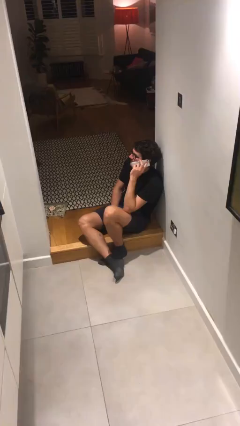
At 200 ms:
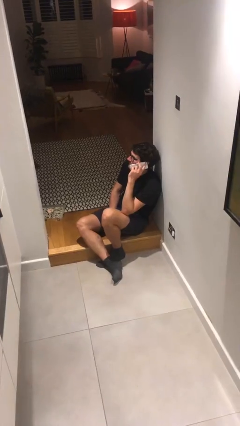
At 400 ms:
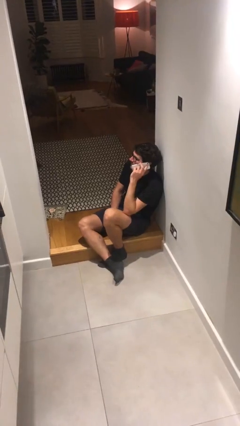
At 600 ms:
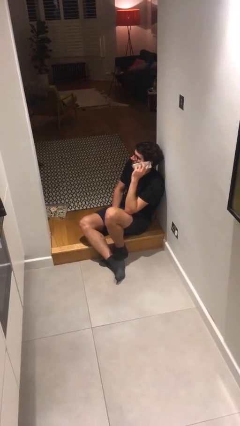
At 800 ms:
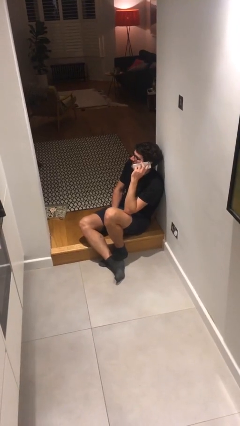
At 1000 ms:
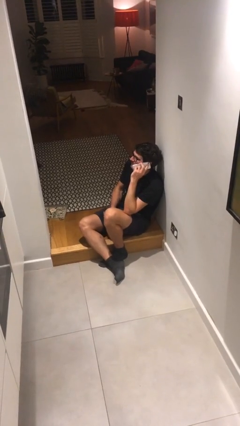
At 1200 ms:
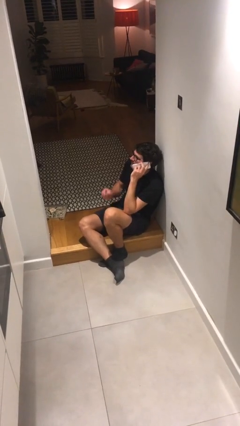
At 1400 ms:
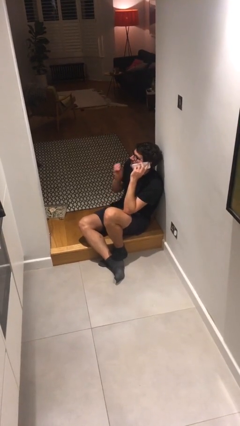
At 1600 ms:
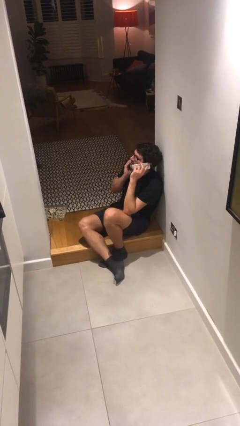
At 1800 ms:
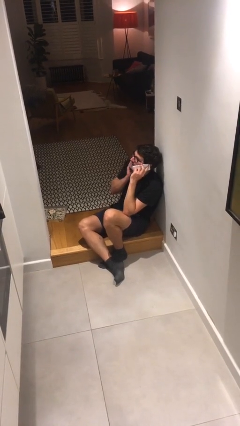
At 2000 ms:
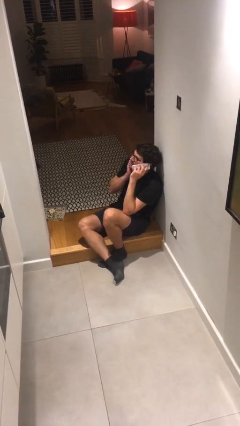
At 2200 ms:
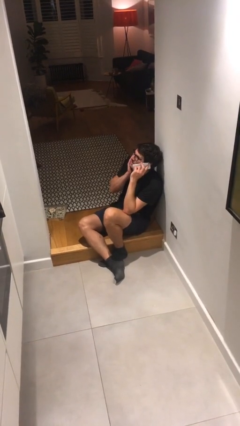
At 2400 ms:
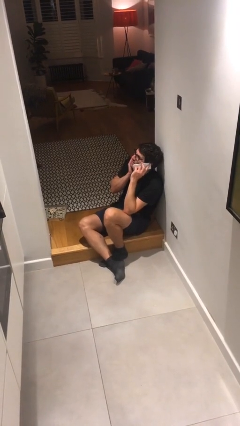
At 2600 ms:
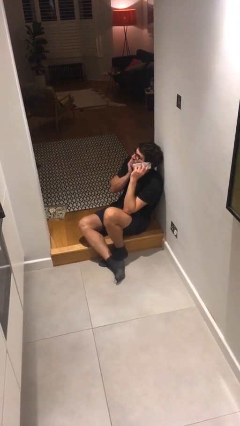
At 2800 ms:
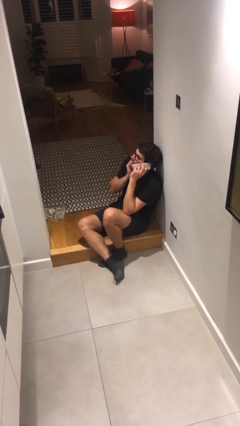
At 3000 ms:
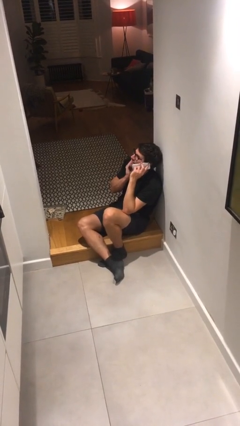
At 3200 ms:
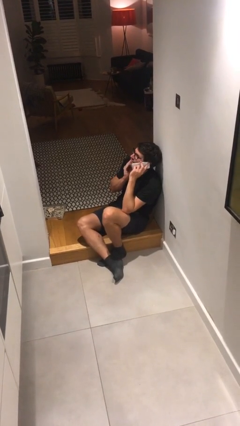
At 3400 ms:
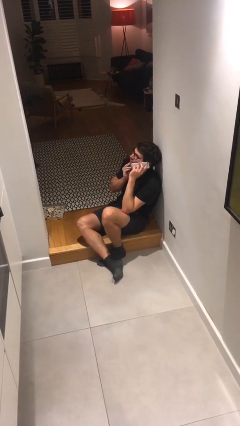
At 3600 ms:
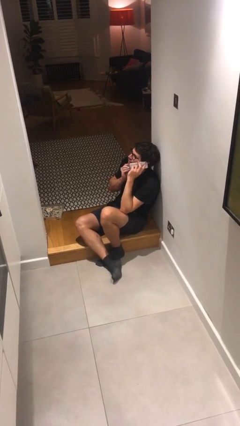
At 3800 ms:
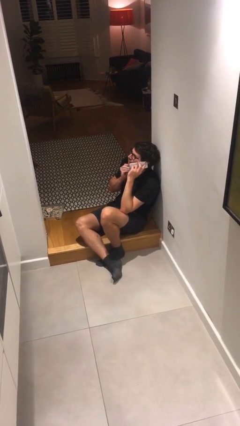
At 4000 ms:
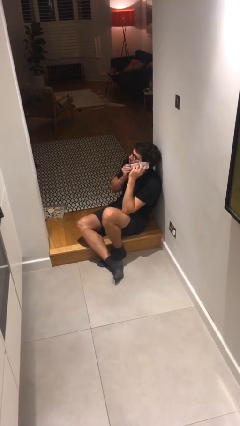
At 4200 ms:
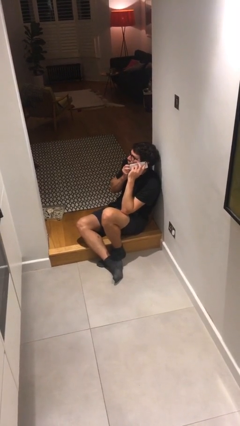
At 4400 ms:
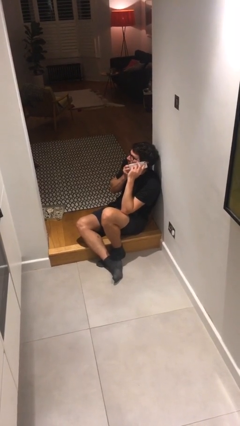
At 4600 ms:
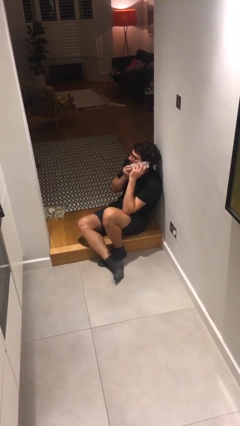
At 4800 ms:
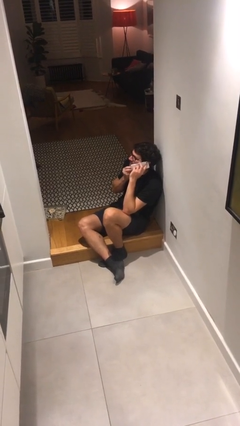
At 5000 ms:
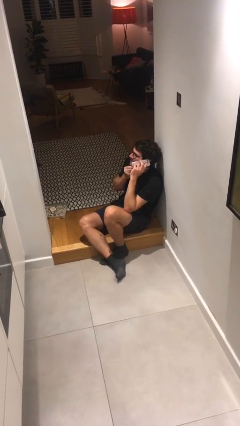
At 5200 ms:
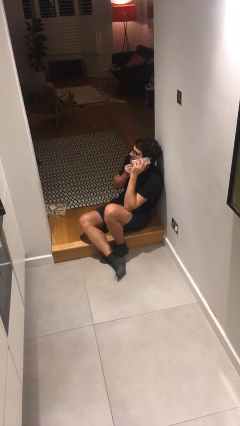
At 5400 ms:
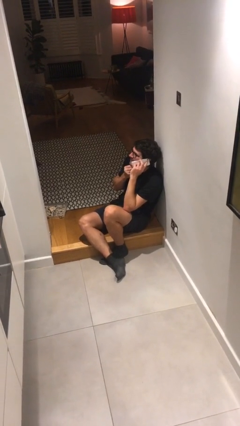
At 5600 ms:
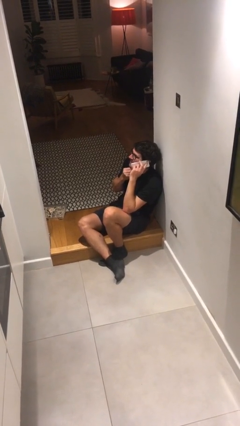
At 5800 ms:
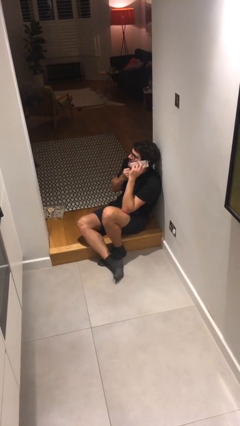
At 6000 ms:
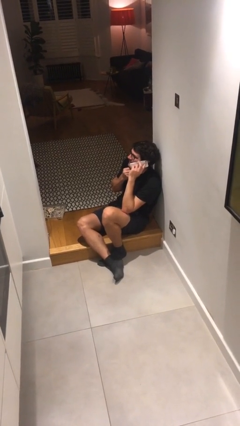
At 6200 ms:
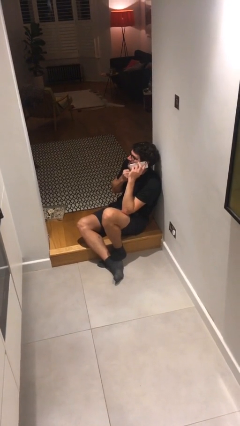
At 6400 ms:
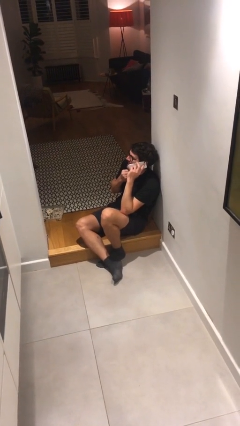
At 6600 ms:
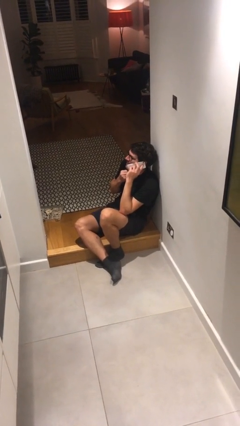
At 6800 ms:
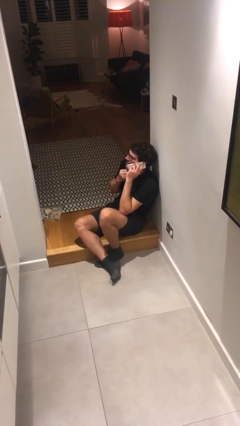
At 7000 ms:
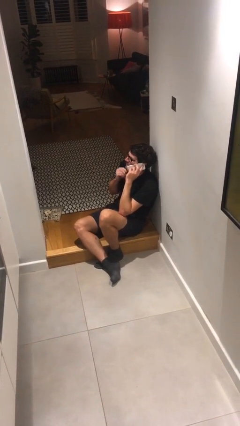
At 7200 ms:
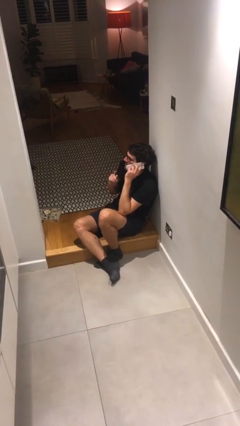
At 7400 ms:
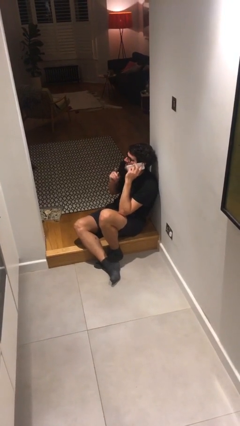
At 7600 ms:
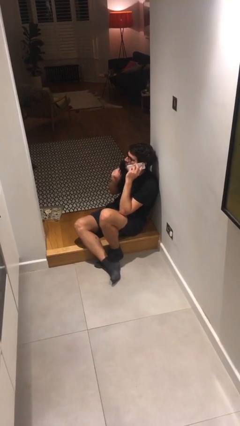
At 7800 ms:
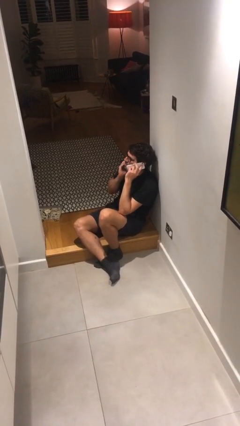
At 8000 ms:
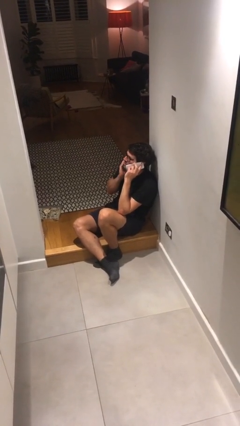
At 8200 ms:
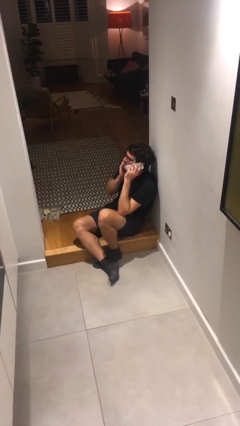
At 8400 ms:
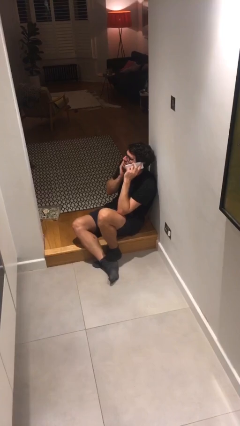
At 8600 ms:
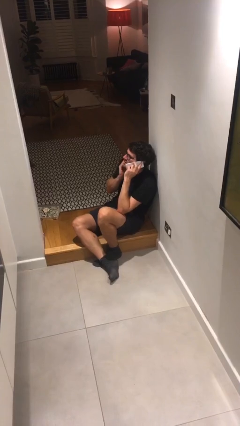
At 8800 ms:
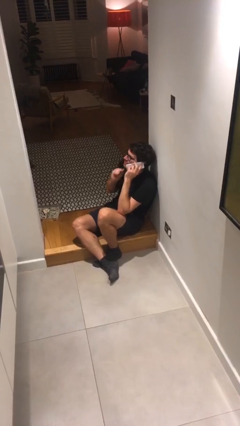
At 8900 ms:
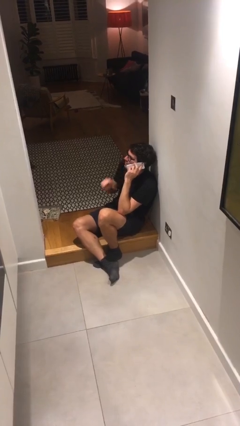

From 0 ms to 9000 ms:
person talks on phone

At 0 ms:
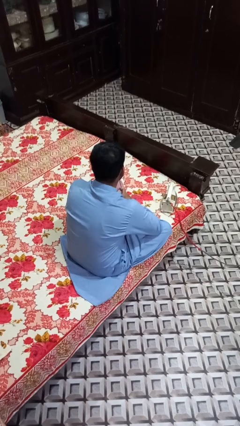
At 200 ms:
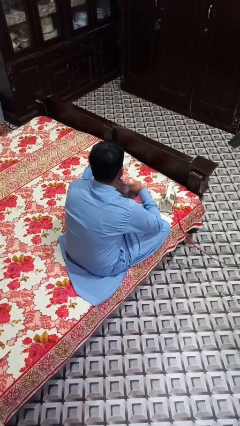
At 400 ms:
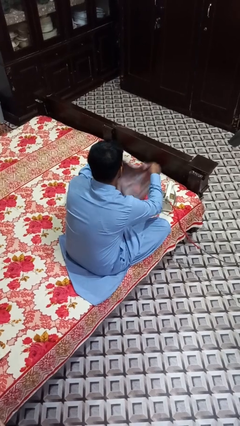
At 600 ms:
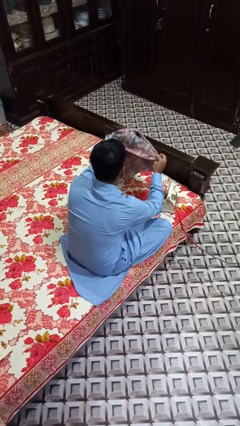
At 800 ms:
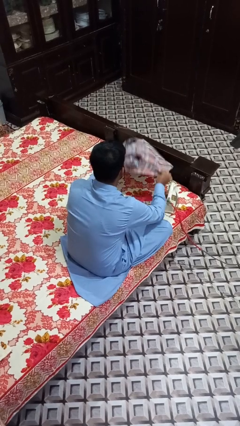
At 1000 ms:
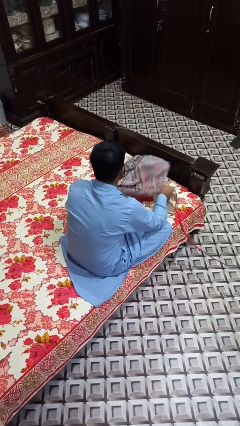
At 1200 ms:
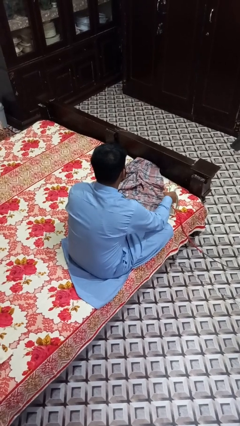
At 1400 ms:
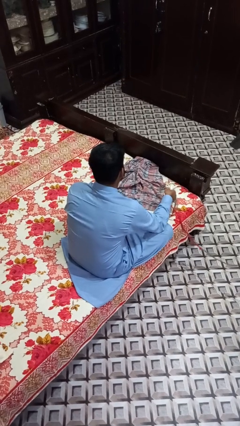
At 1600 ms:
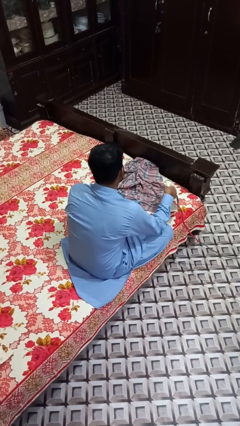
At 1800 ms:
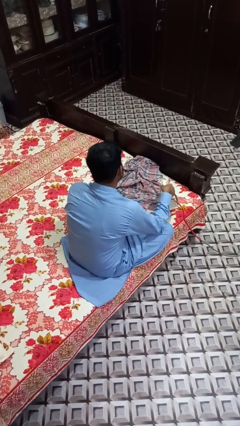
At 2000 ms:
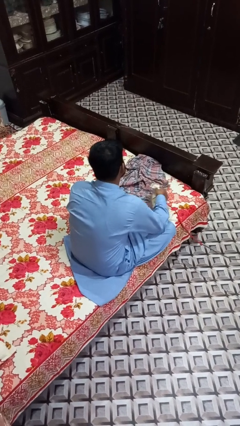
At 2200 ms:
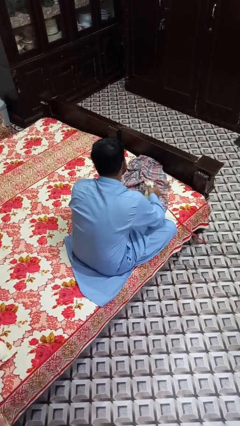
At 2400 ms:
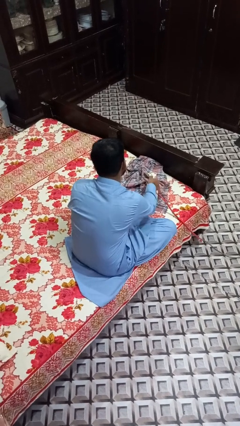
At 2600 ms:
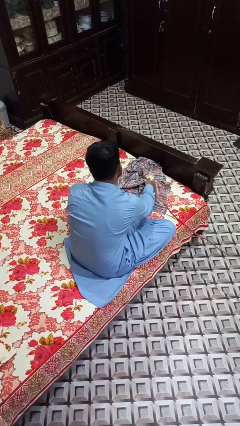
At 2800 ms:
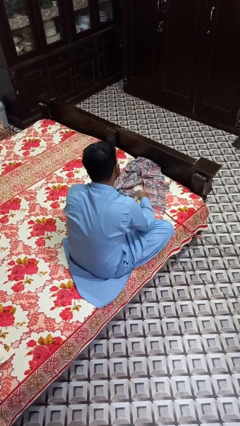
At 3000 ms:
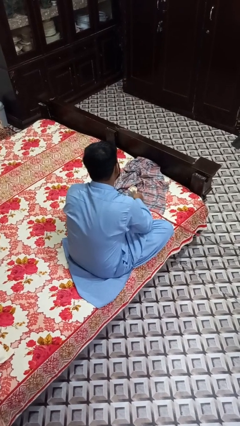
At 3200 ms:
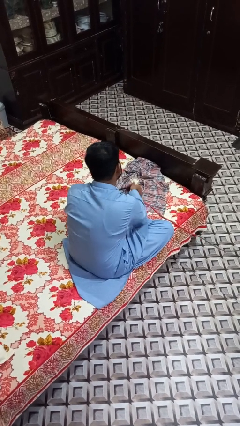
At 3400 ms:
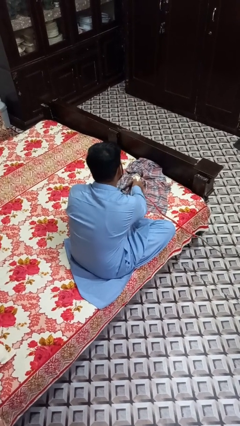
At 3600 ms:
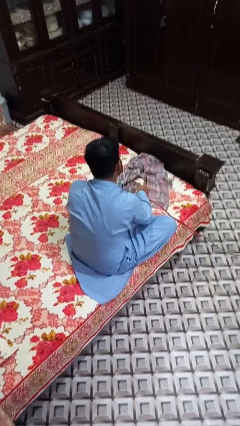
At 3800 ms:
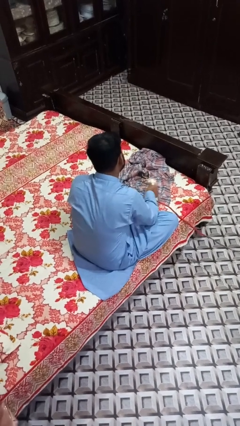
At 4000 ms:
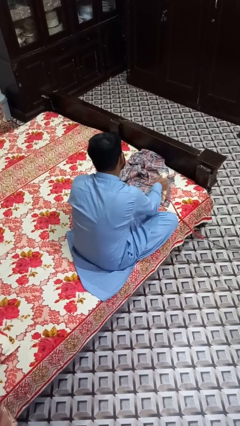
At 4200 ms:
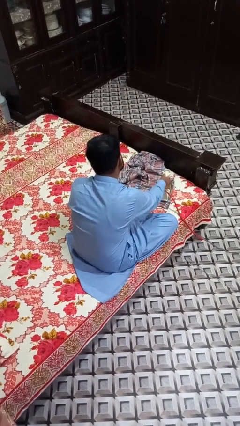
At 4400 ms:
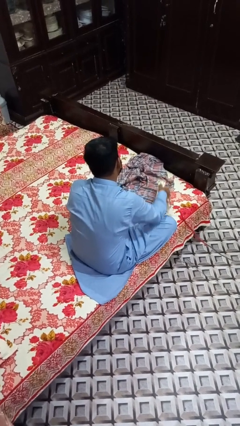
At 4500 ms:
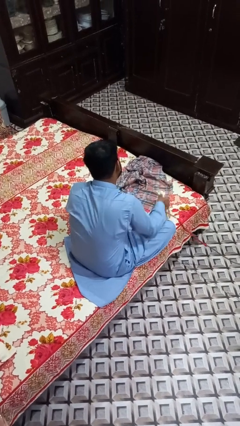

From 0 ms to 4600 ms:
person irons clothes

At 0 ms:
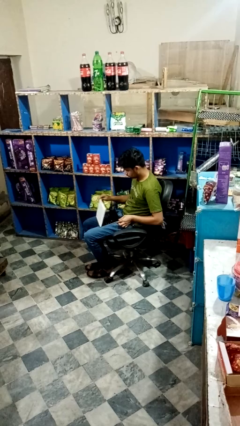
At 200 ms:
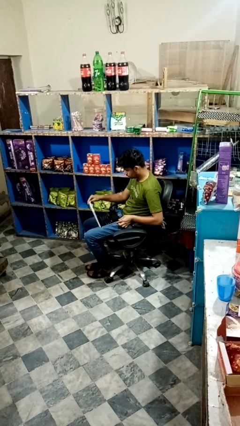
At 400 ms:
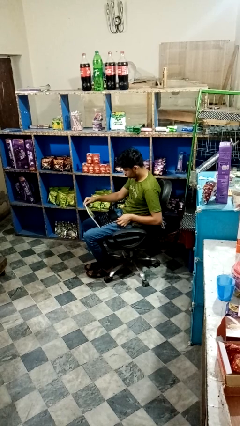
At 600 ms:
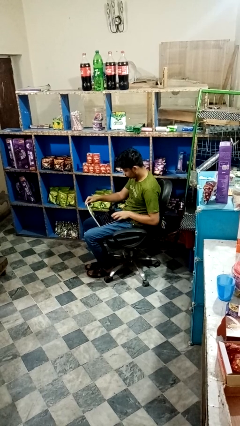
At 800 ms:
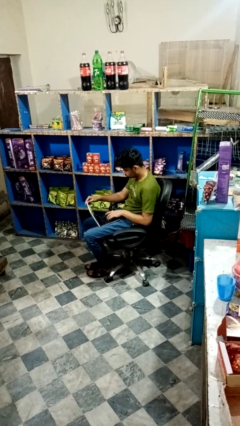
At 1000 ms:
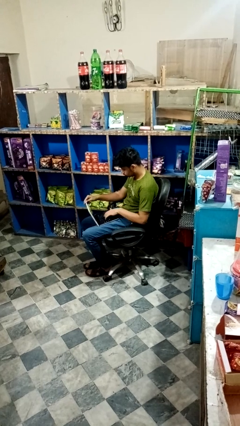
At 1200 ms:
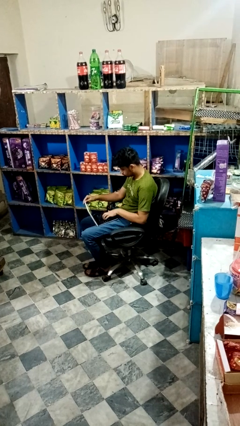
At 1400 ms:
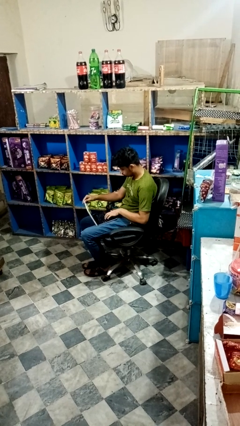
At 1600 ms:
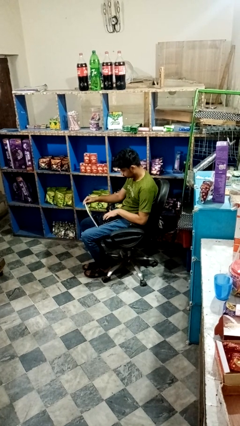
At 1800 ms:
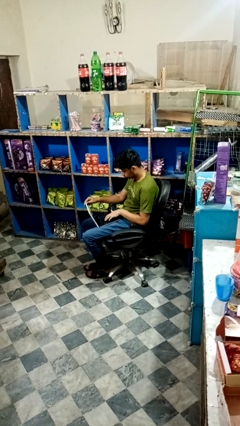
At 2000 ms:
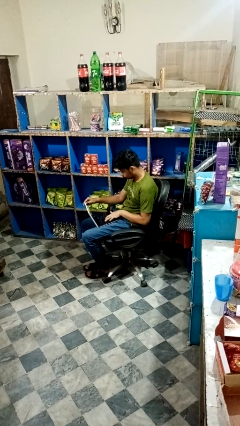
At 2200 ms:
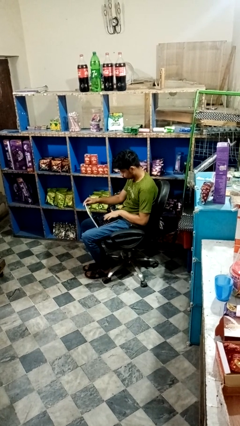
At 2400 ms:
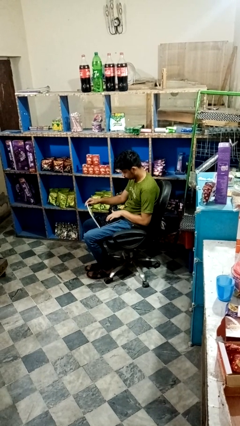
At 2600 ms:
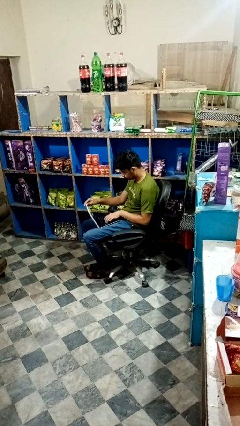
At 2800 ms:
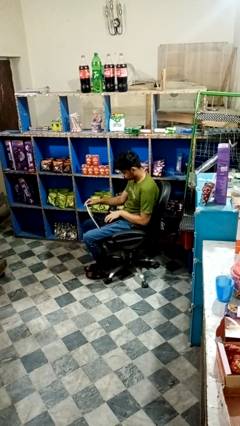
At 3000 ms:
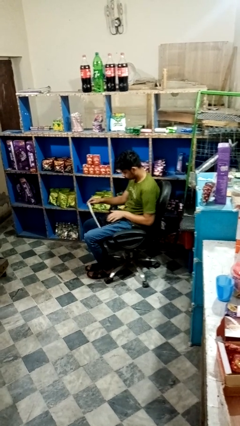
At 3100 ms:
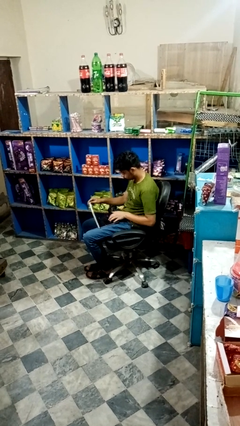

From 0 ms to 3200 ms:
person opens laptop

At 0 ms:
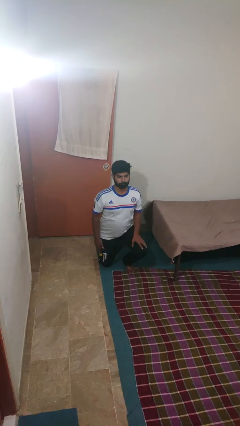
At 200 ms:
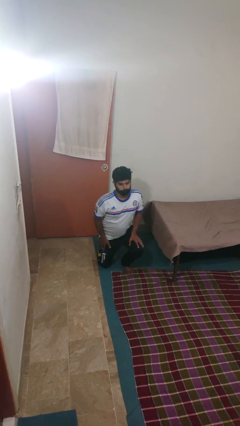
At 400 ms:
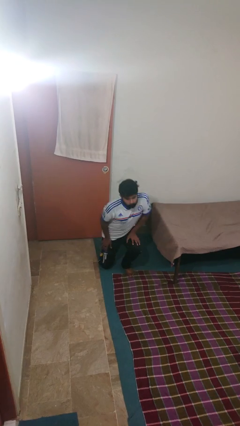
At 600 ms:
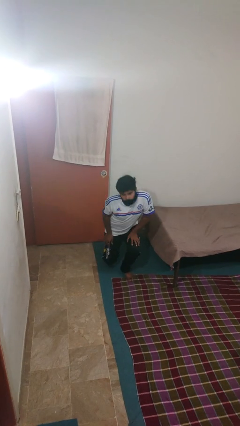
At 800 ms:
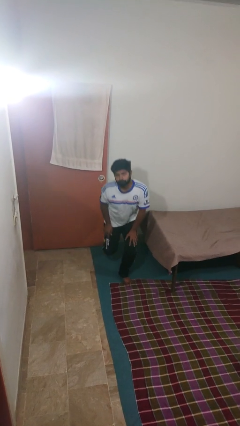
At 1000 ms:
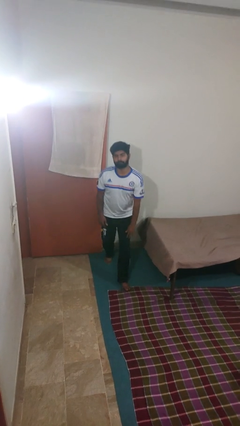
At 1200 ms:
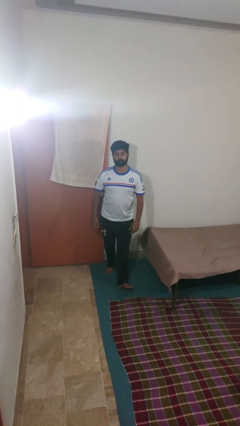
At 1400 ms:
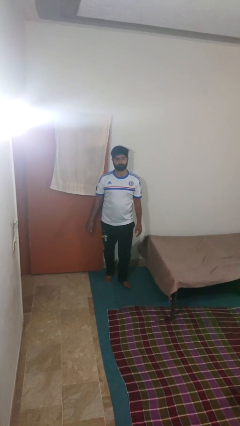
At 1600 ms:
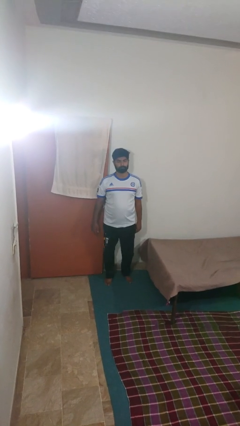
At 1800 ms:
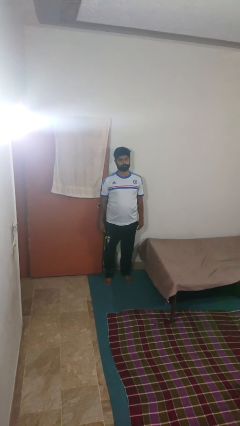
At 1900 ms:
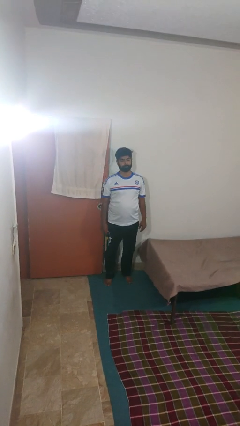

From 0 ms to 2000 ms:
person stands up from floor
